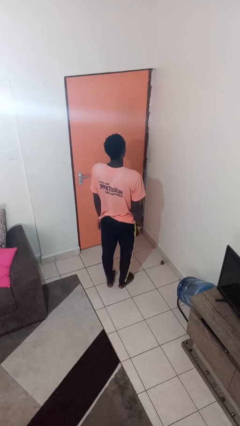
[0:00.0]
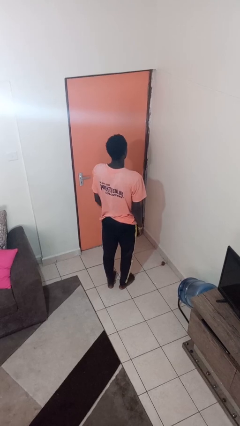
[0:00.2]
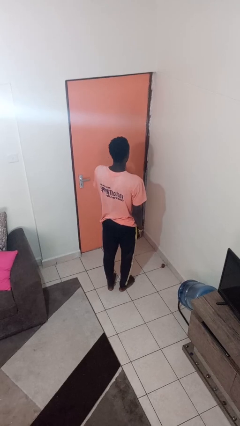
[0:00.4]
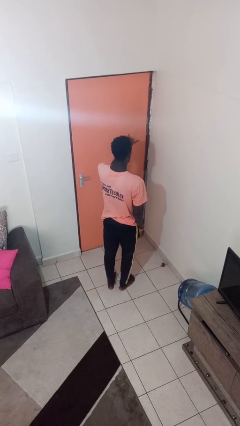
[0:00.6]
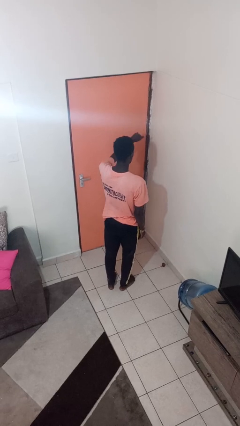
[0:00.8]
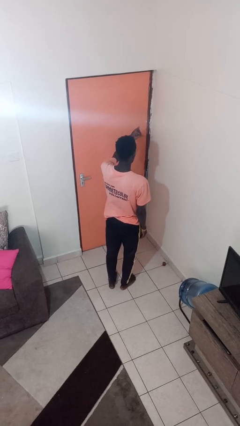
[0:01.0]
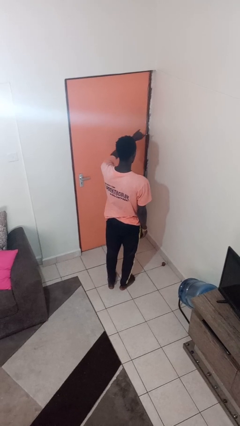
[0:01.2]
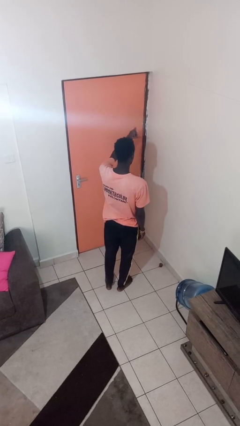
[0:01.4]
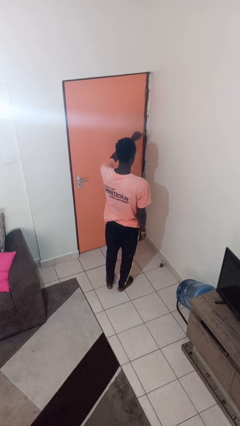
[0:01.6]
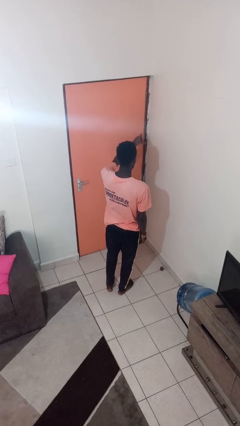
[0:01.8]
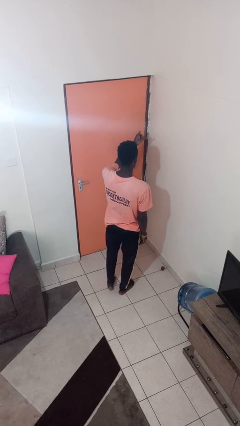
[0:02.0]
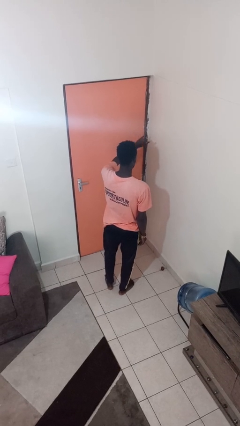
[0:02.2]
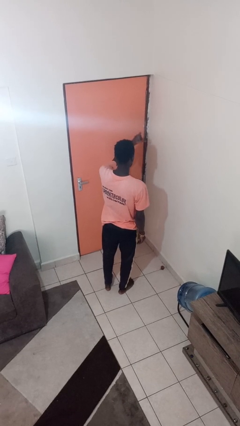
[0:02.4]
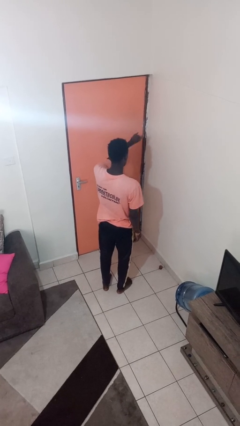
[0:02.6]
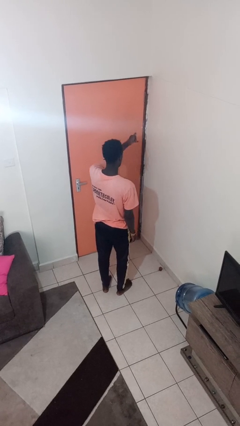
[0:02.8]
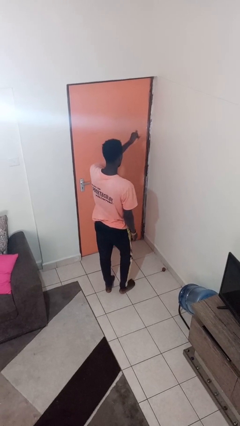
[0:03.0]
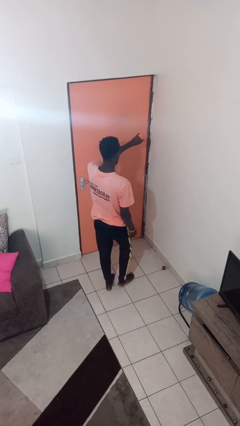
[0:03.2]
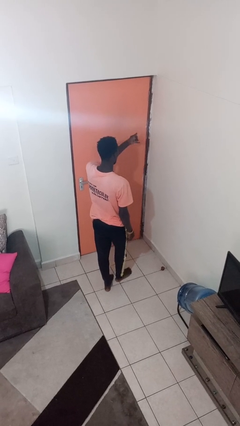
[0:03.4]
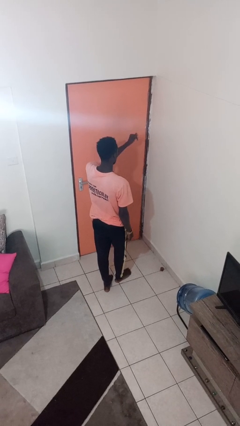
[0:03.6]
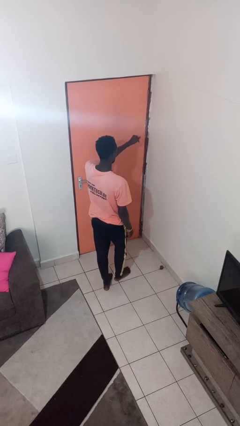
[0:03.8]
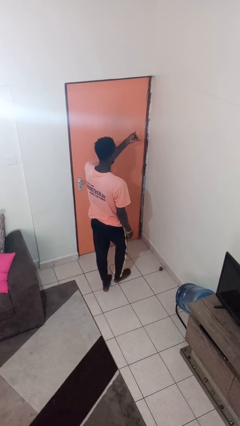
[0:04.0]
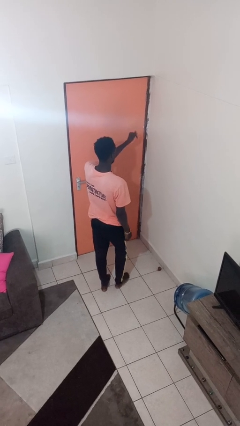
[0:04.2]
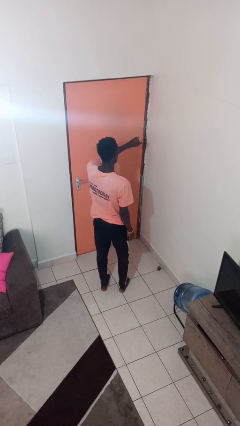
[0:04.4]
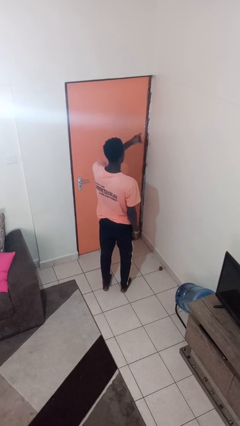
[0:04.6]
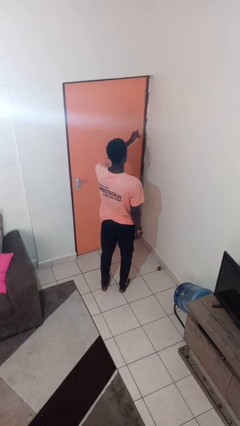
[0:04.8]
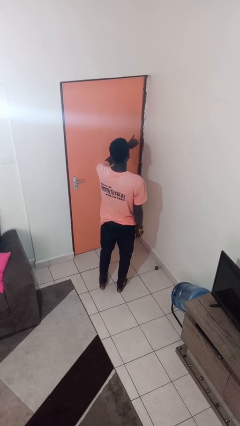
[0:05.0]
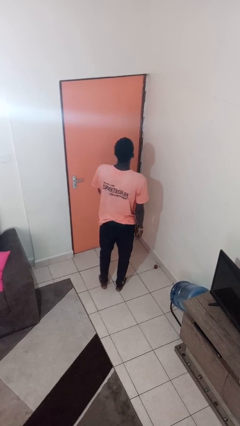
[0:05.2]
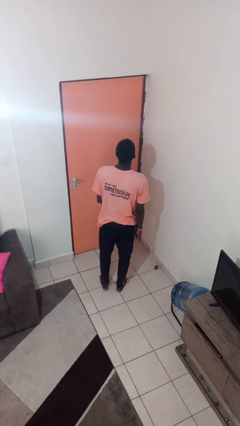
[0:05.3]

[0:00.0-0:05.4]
person gestures hang loose

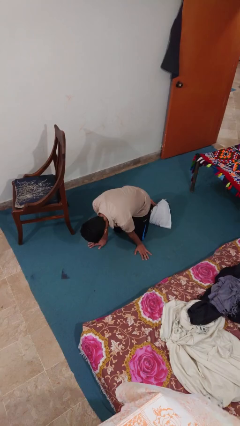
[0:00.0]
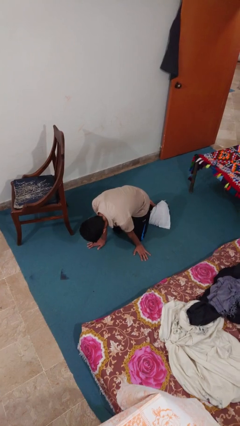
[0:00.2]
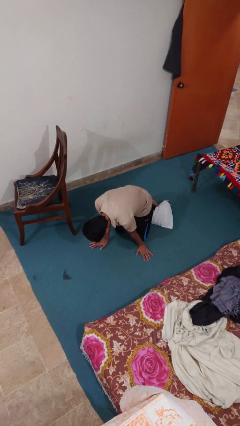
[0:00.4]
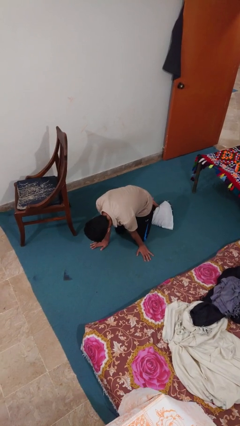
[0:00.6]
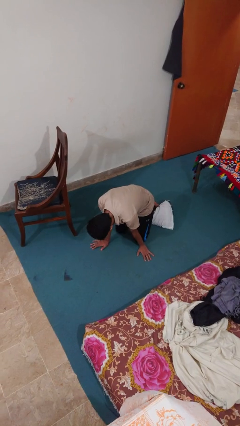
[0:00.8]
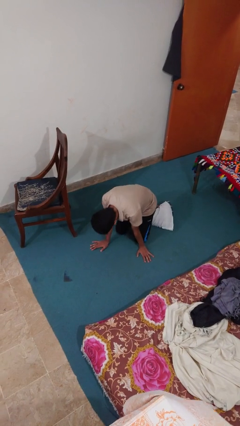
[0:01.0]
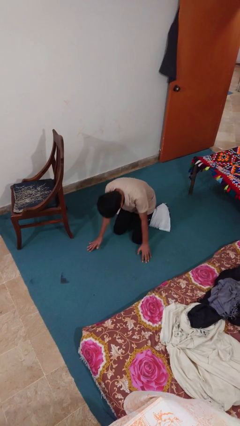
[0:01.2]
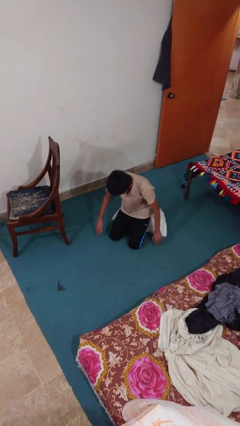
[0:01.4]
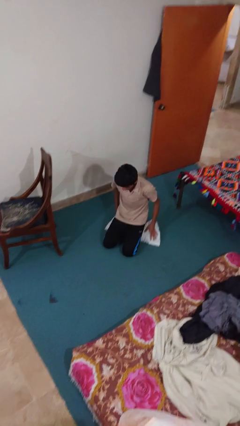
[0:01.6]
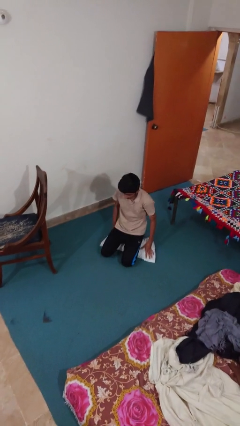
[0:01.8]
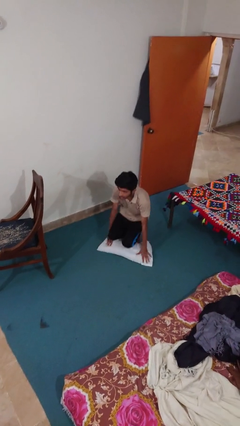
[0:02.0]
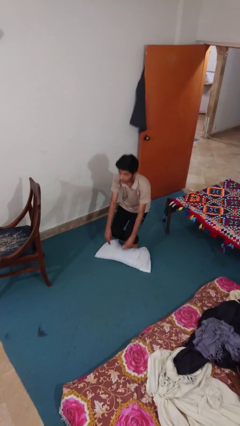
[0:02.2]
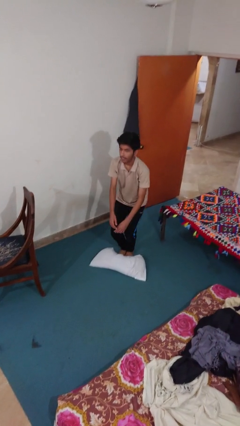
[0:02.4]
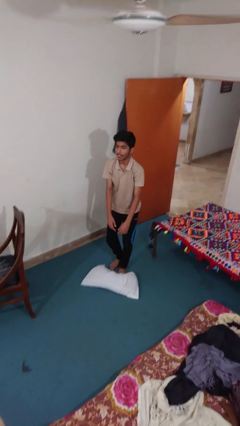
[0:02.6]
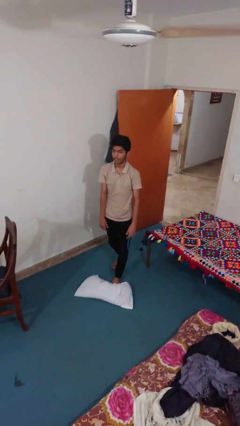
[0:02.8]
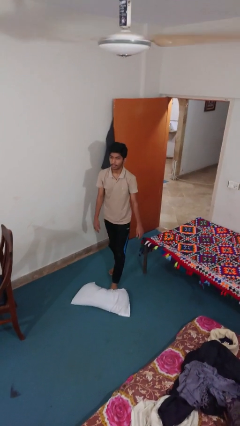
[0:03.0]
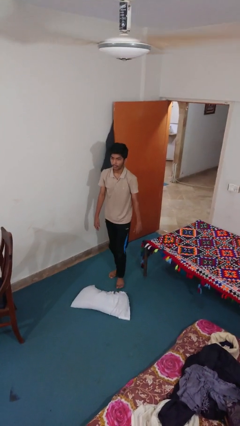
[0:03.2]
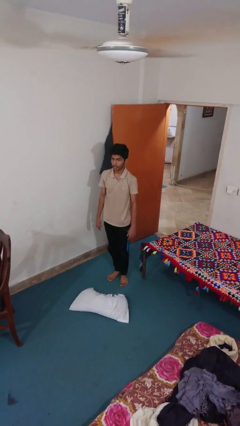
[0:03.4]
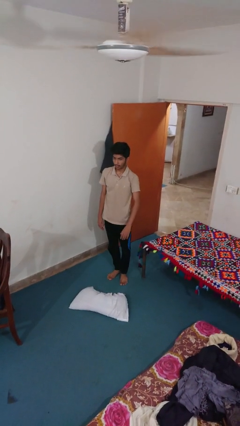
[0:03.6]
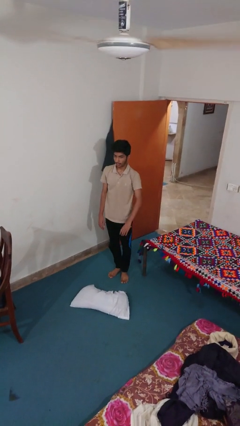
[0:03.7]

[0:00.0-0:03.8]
person stands up from floor

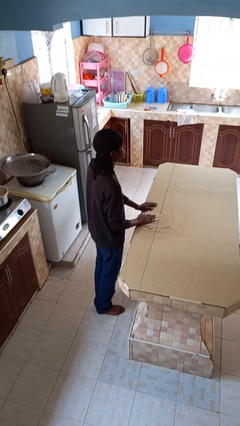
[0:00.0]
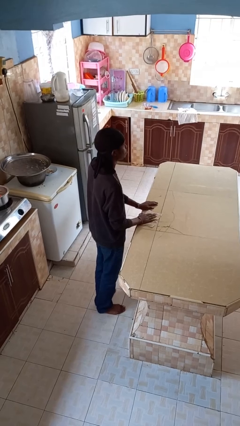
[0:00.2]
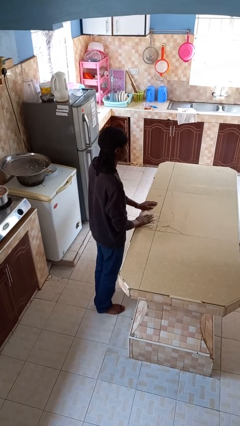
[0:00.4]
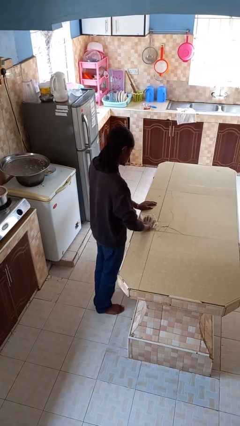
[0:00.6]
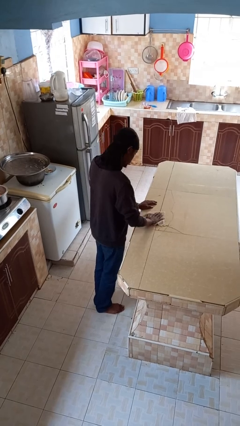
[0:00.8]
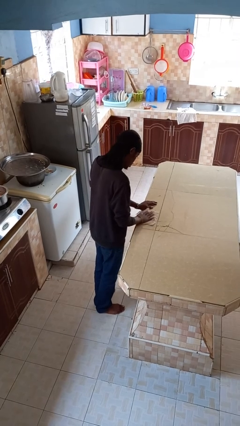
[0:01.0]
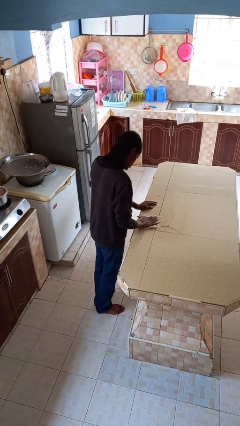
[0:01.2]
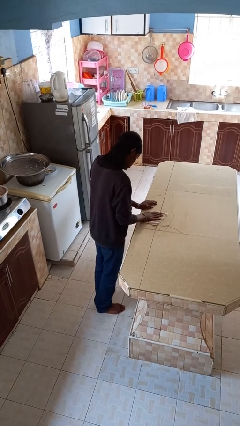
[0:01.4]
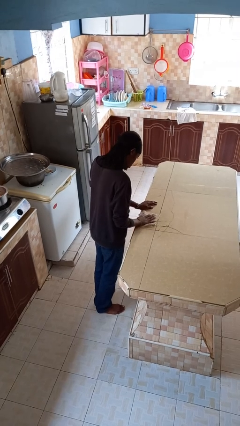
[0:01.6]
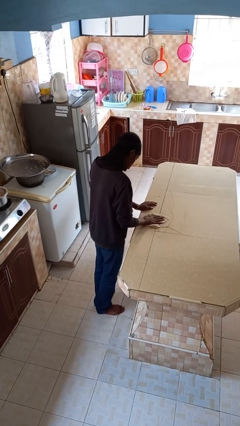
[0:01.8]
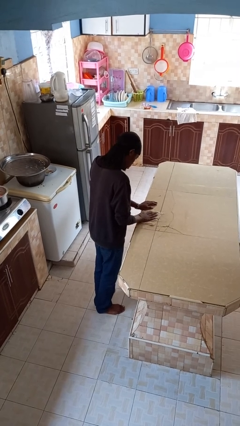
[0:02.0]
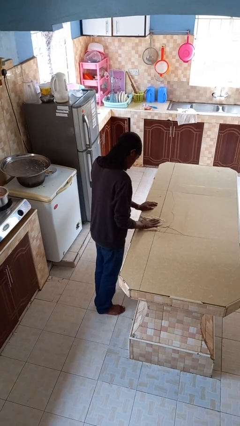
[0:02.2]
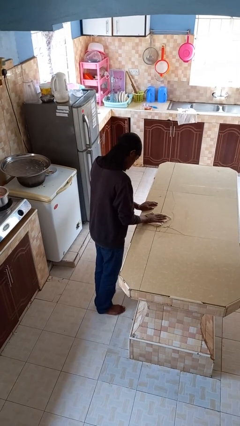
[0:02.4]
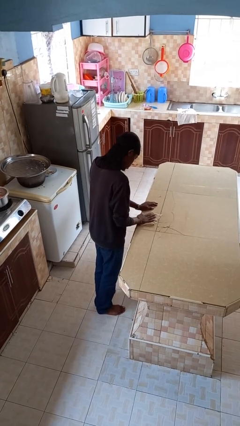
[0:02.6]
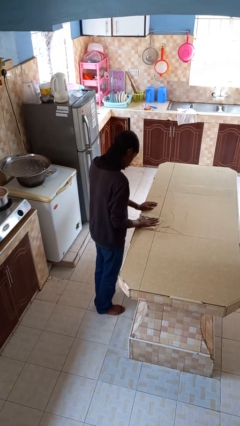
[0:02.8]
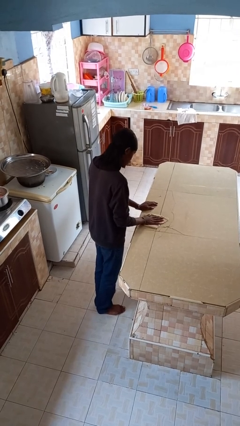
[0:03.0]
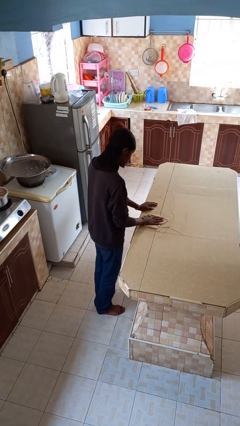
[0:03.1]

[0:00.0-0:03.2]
person cleans table with rag

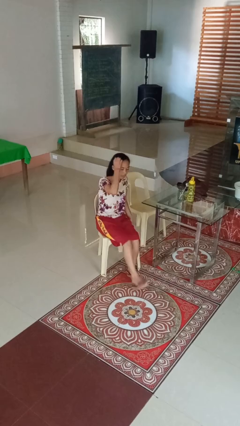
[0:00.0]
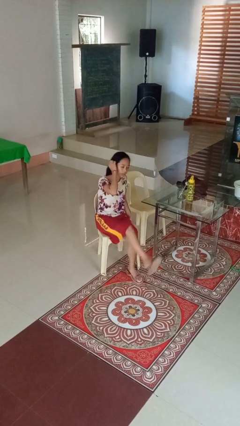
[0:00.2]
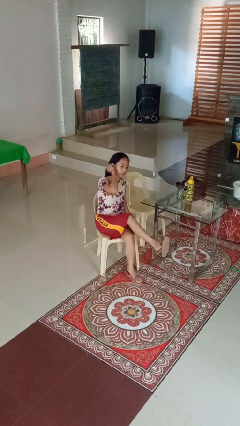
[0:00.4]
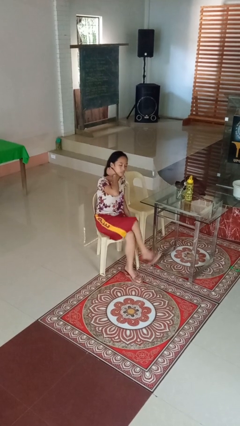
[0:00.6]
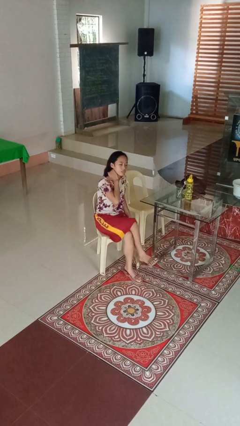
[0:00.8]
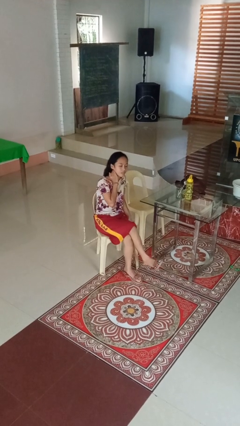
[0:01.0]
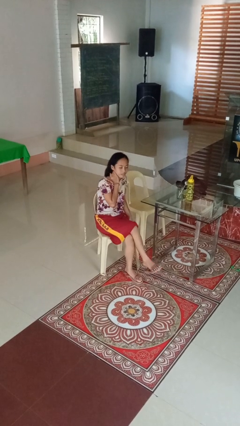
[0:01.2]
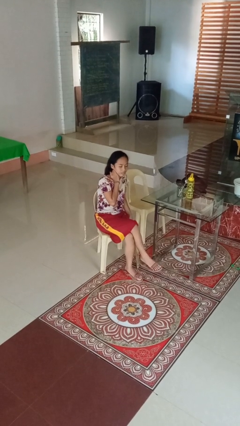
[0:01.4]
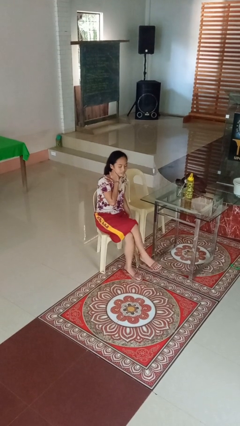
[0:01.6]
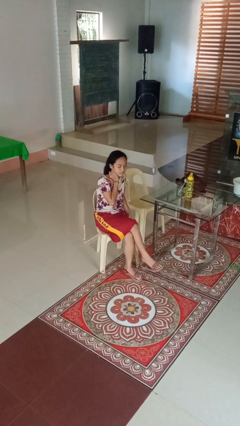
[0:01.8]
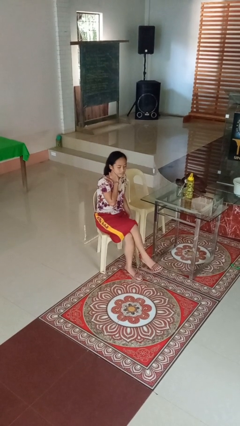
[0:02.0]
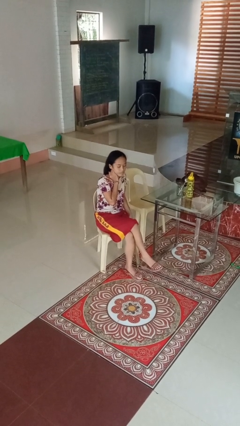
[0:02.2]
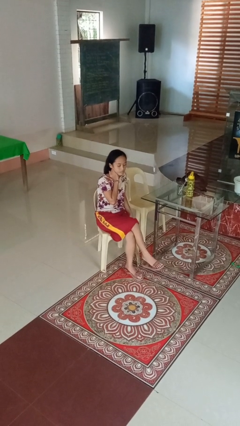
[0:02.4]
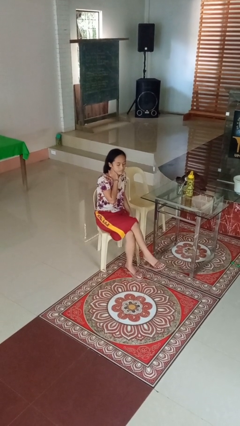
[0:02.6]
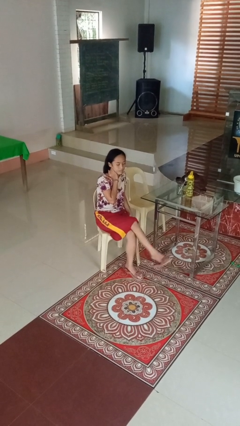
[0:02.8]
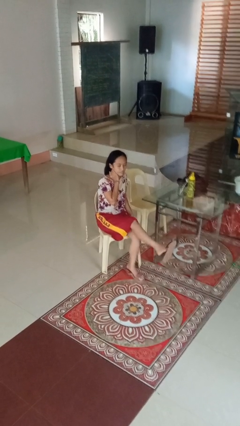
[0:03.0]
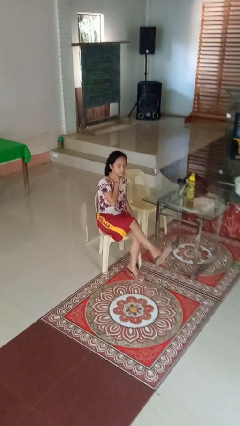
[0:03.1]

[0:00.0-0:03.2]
person crosses legs

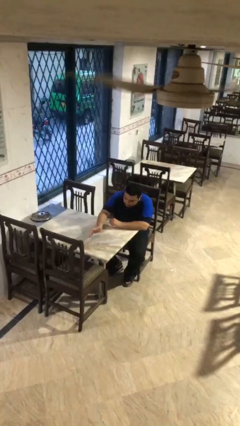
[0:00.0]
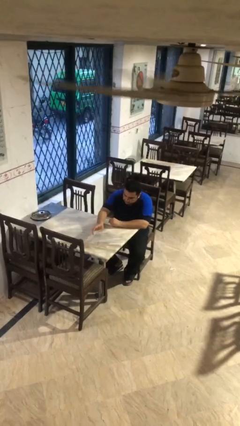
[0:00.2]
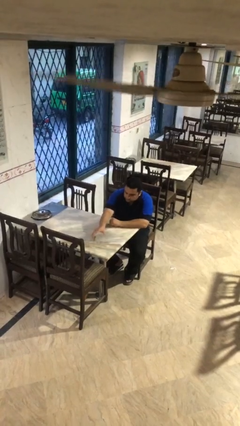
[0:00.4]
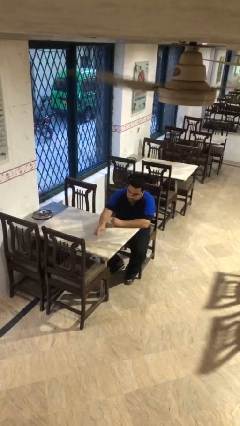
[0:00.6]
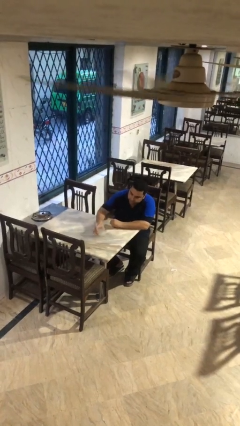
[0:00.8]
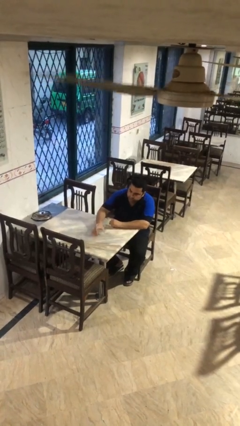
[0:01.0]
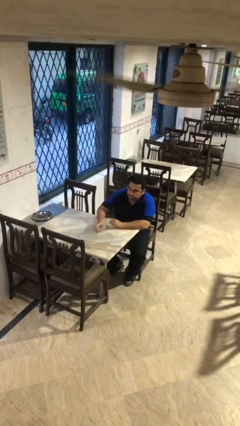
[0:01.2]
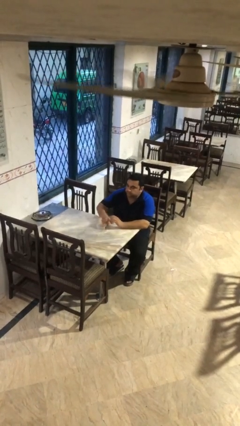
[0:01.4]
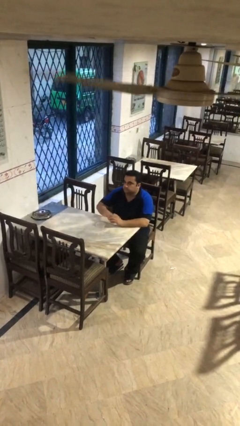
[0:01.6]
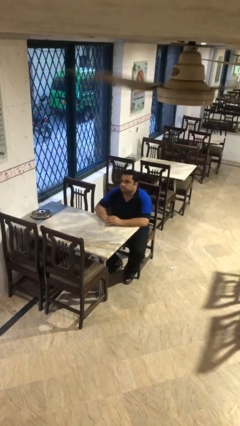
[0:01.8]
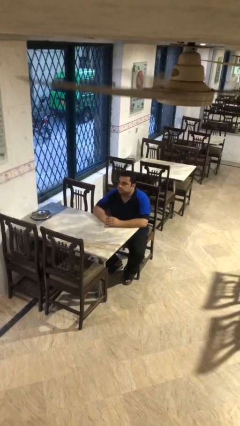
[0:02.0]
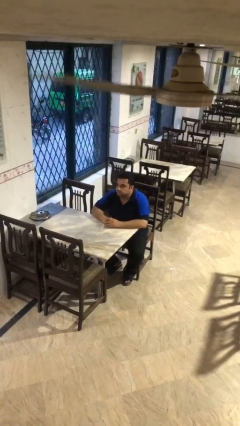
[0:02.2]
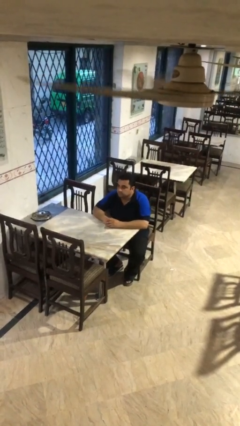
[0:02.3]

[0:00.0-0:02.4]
person sets upright glass

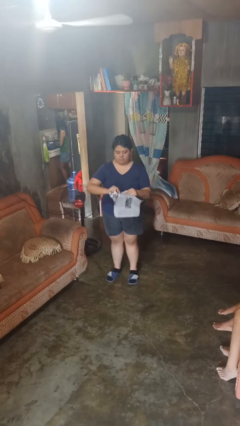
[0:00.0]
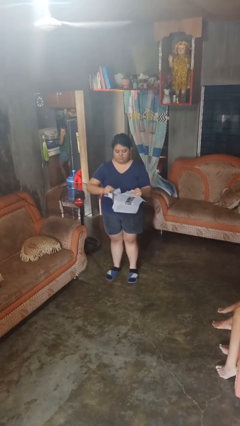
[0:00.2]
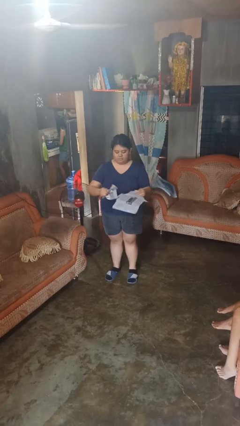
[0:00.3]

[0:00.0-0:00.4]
person tears paper
